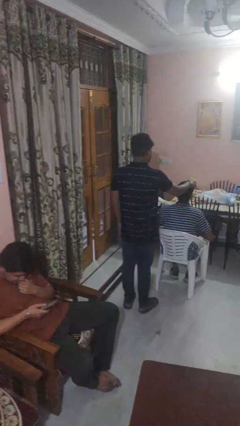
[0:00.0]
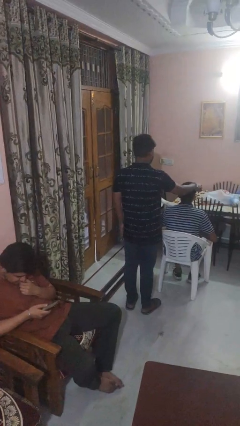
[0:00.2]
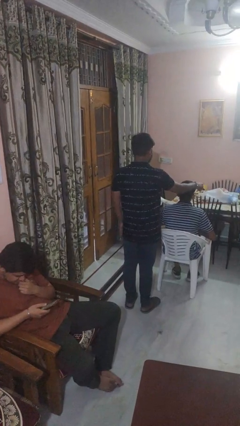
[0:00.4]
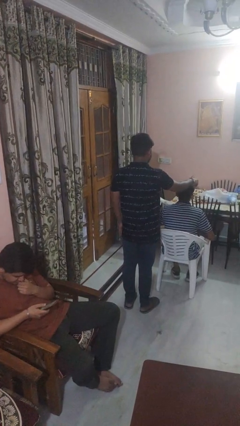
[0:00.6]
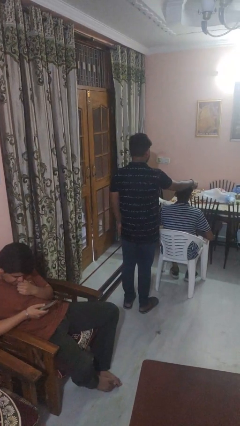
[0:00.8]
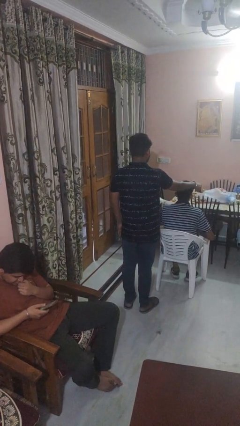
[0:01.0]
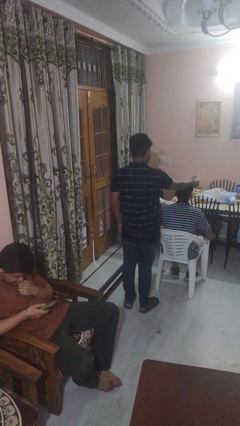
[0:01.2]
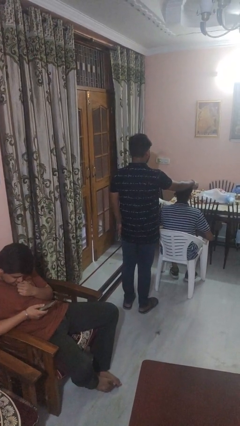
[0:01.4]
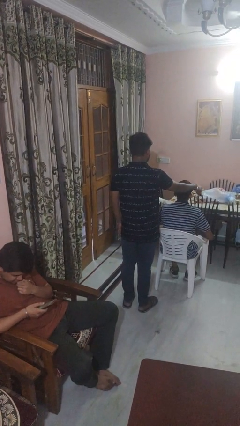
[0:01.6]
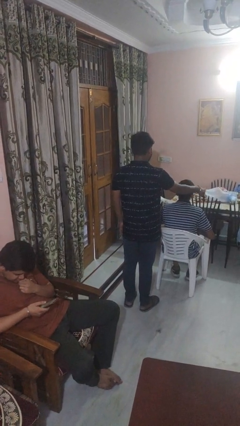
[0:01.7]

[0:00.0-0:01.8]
person brushes hair of person

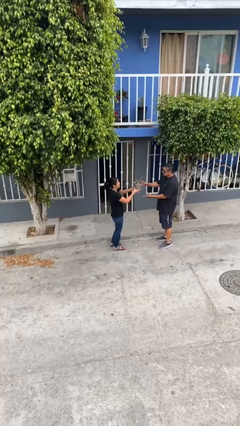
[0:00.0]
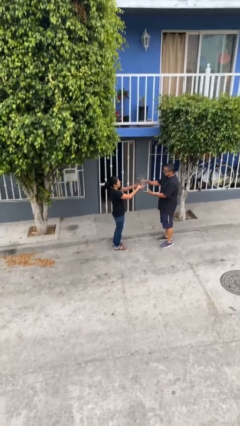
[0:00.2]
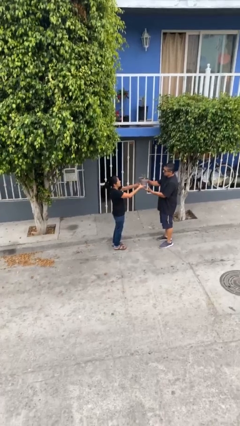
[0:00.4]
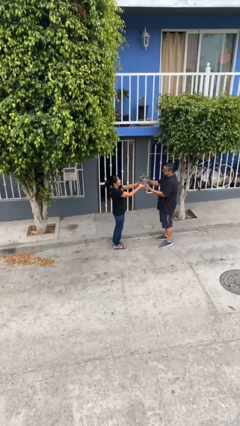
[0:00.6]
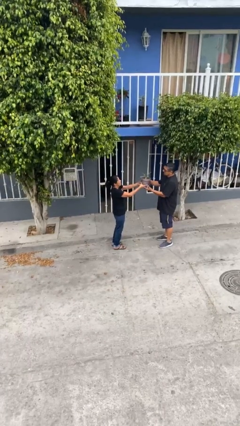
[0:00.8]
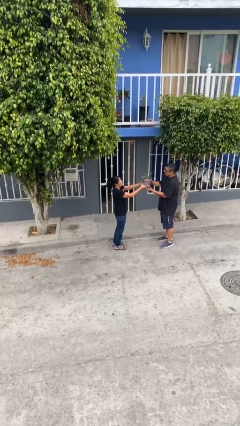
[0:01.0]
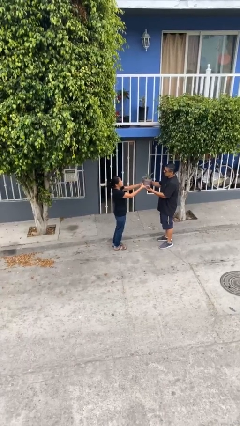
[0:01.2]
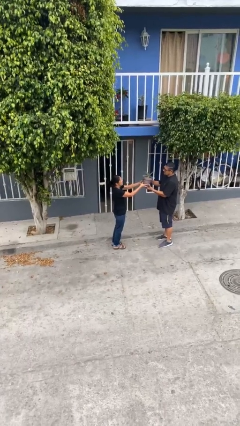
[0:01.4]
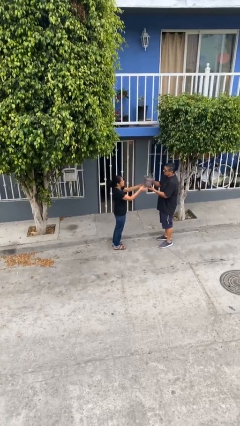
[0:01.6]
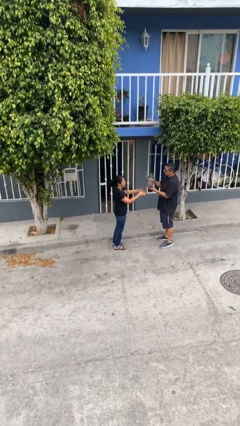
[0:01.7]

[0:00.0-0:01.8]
person transfers object to person

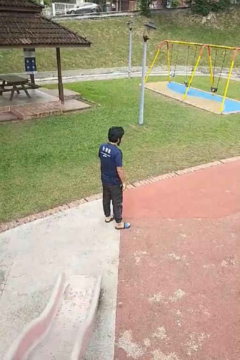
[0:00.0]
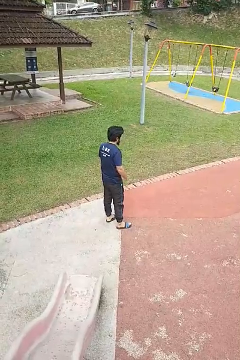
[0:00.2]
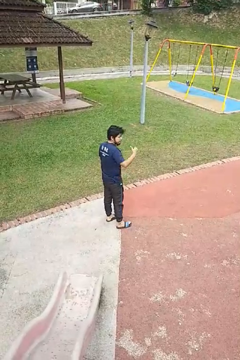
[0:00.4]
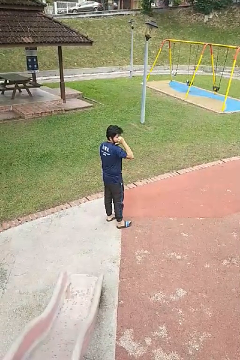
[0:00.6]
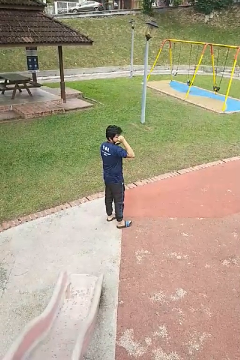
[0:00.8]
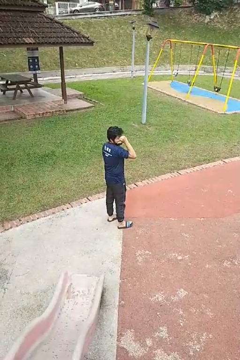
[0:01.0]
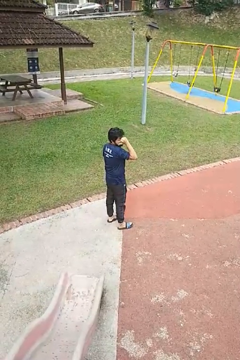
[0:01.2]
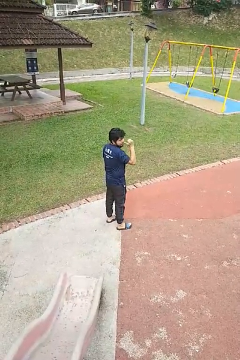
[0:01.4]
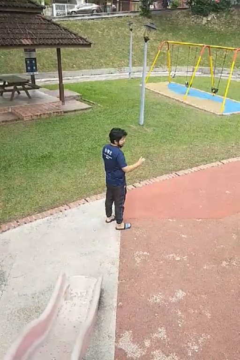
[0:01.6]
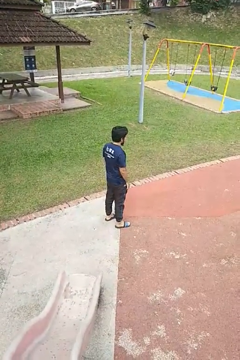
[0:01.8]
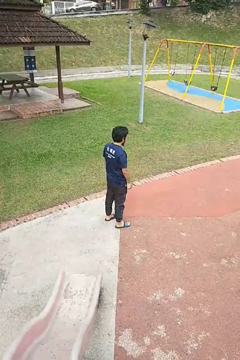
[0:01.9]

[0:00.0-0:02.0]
person gestures behind me

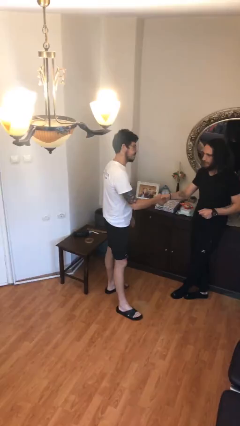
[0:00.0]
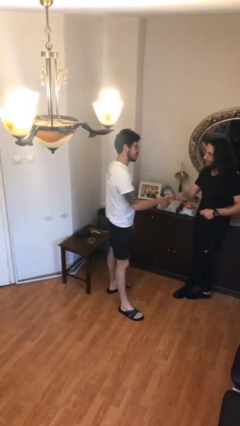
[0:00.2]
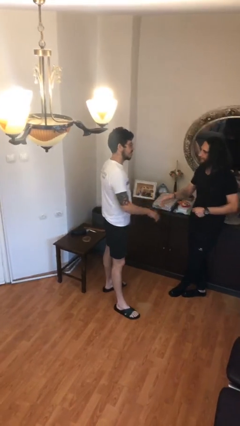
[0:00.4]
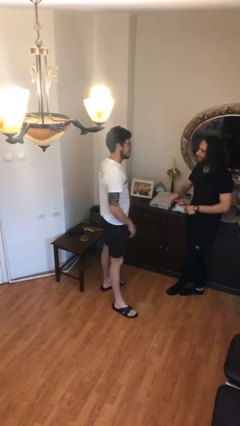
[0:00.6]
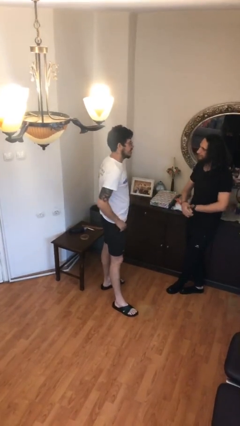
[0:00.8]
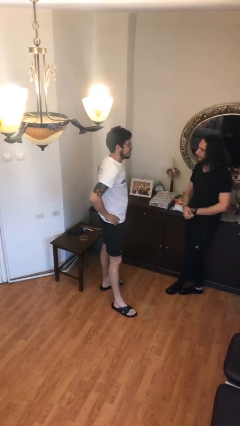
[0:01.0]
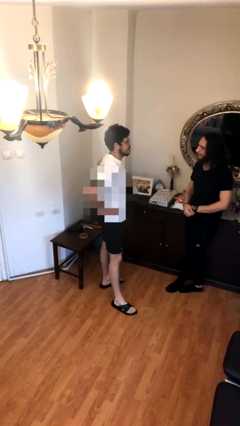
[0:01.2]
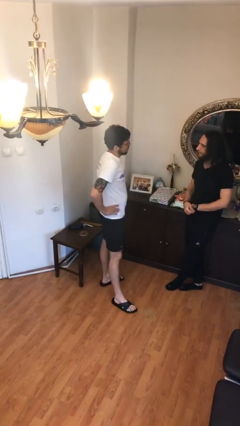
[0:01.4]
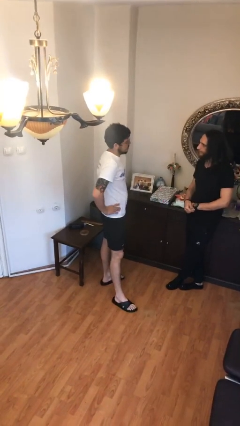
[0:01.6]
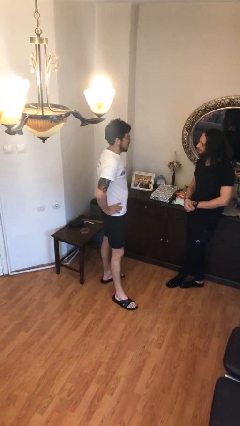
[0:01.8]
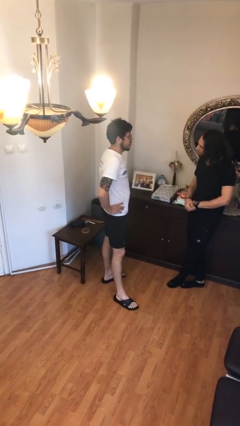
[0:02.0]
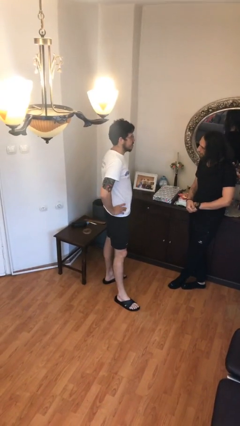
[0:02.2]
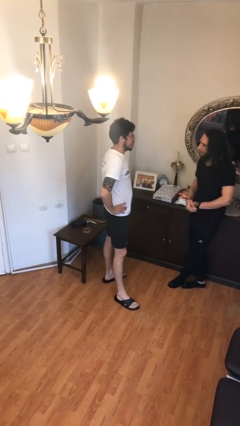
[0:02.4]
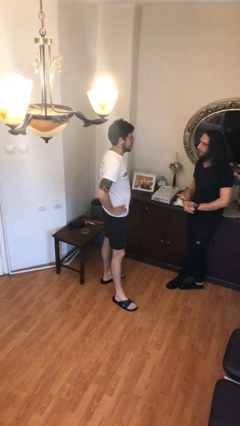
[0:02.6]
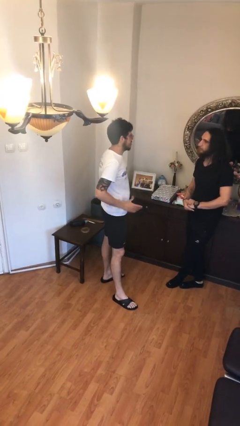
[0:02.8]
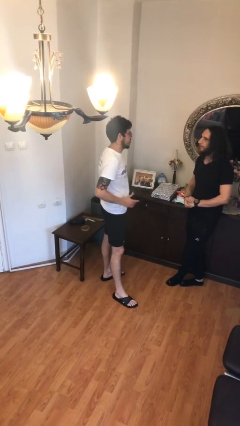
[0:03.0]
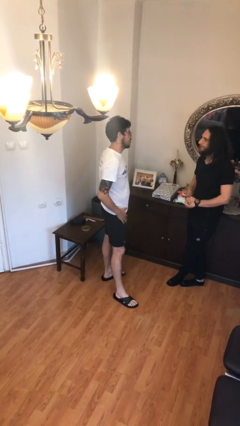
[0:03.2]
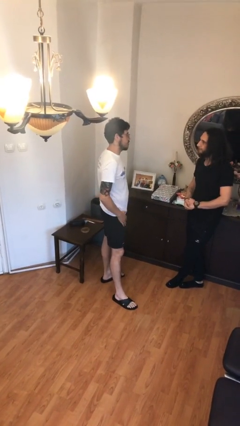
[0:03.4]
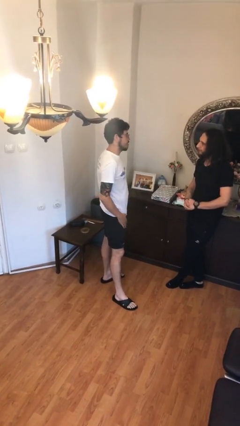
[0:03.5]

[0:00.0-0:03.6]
person talks to person

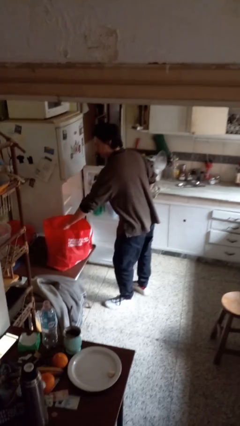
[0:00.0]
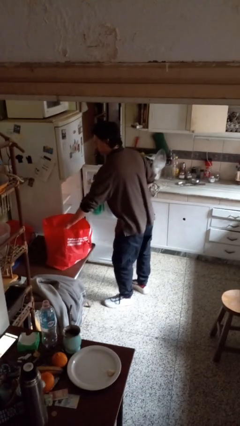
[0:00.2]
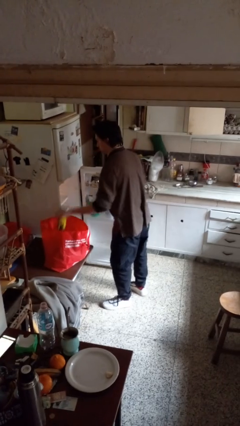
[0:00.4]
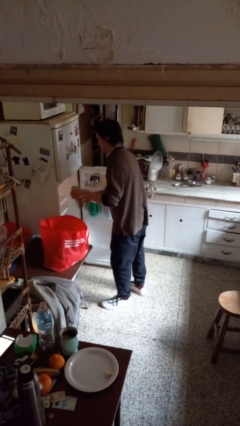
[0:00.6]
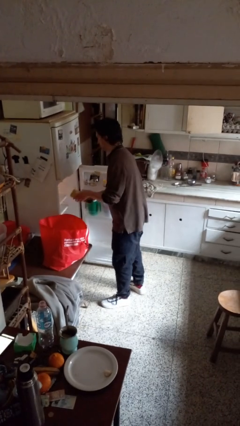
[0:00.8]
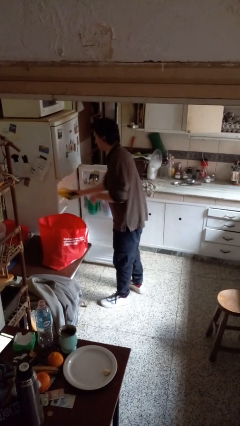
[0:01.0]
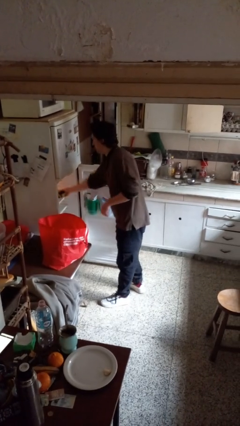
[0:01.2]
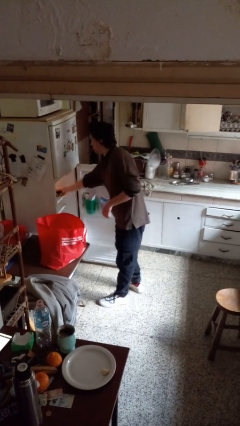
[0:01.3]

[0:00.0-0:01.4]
person loads groceries into refrigerator

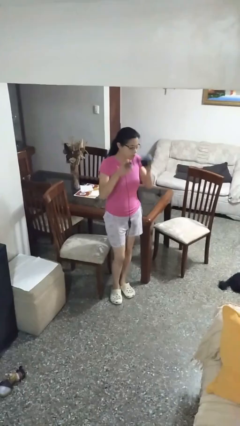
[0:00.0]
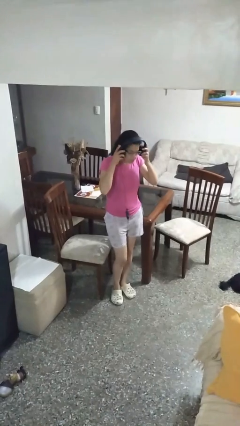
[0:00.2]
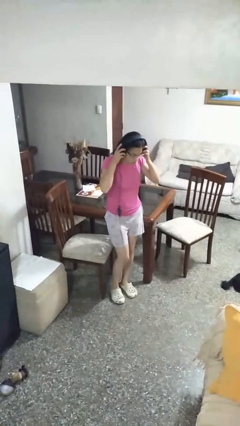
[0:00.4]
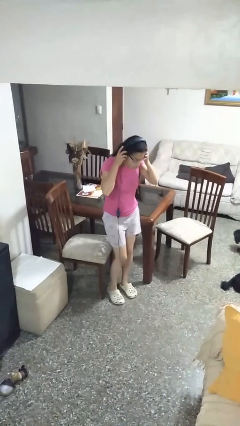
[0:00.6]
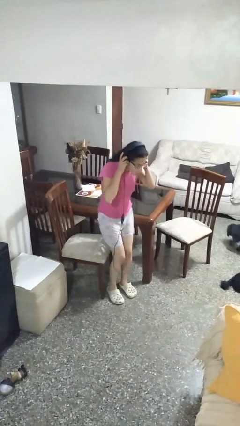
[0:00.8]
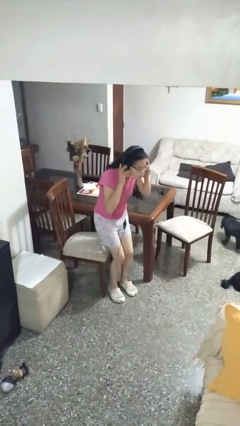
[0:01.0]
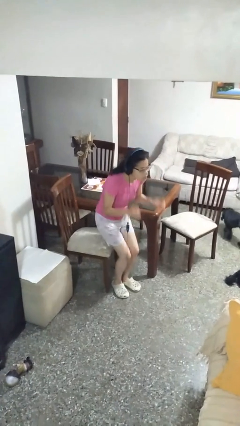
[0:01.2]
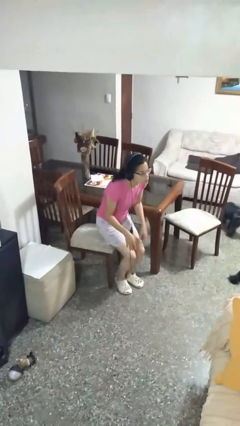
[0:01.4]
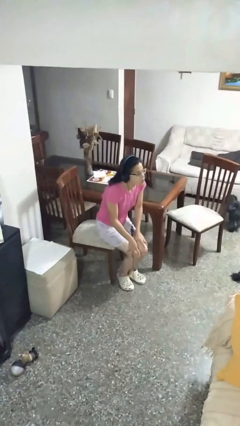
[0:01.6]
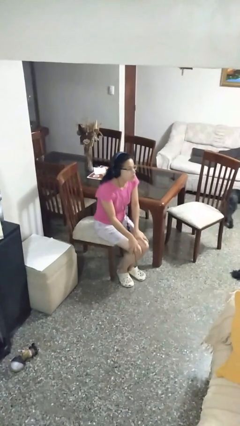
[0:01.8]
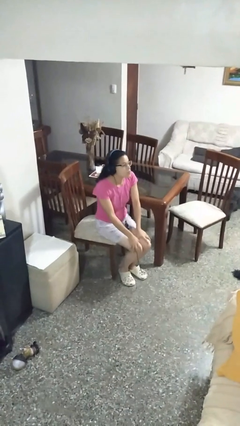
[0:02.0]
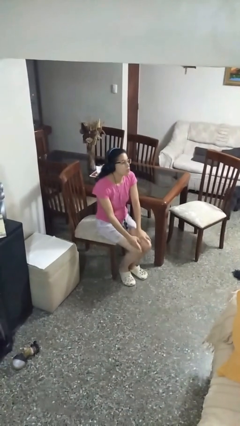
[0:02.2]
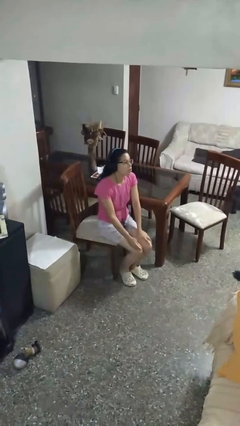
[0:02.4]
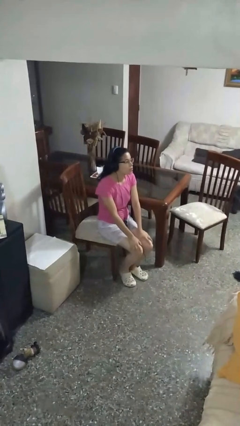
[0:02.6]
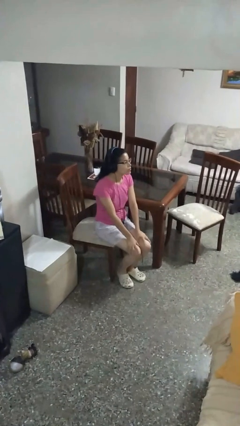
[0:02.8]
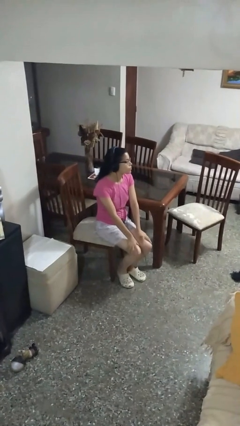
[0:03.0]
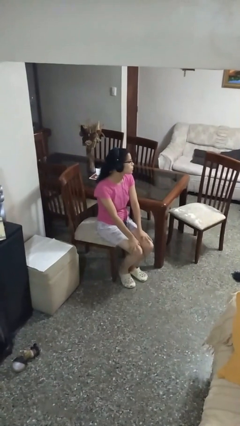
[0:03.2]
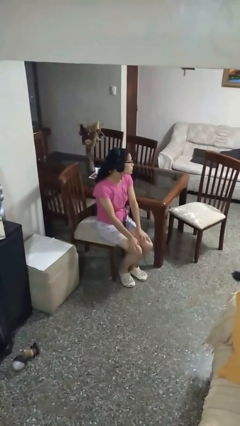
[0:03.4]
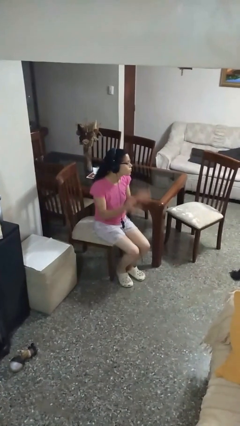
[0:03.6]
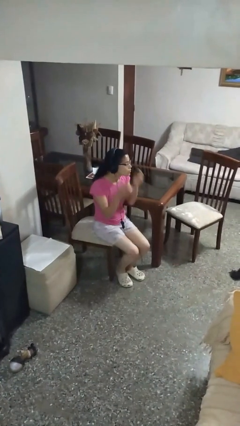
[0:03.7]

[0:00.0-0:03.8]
person puts on headphones

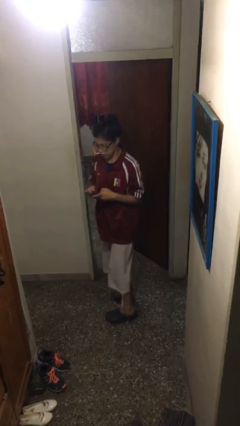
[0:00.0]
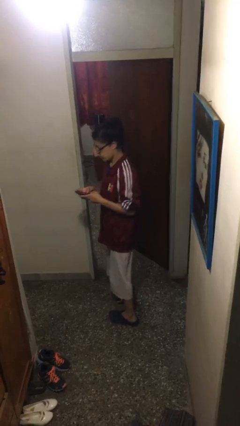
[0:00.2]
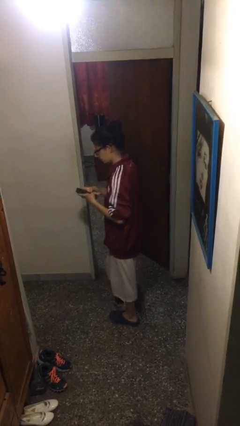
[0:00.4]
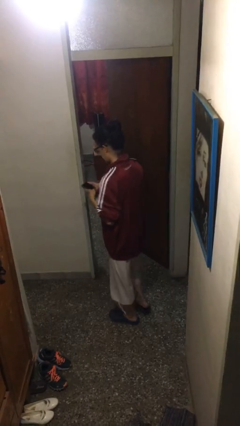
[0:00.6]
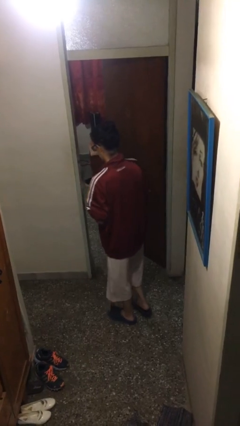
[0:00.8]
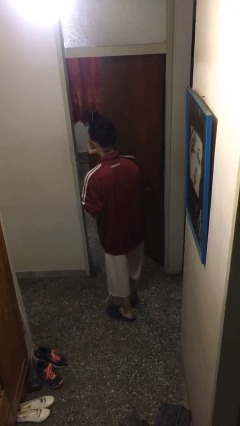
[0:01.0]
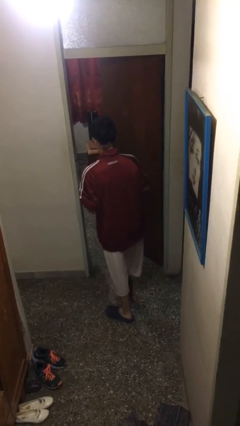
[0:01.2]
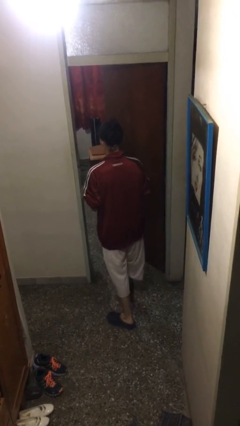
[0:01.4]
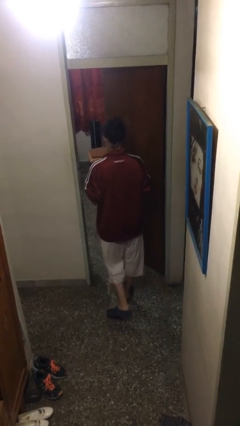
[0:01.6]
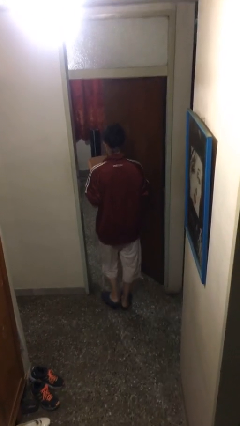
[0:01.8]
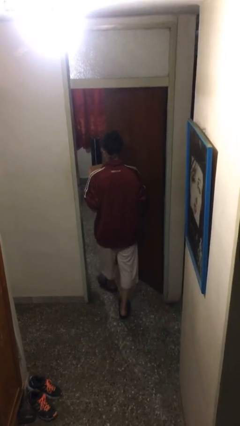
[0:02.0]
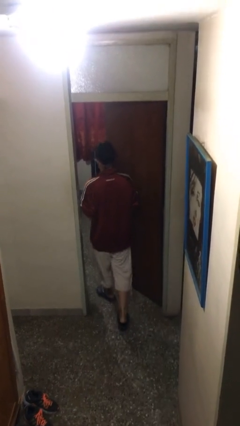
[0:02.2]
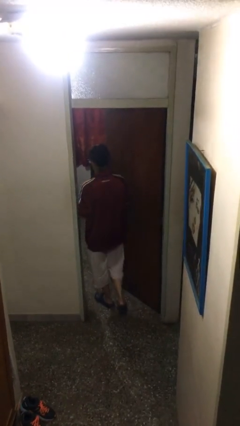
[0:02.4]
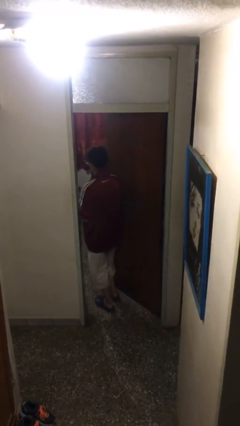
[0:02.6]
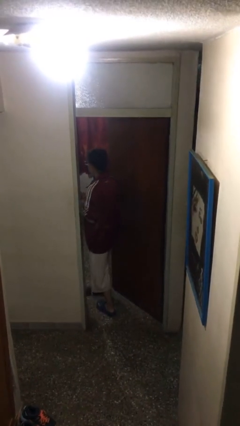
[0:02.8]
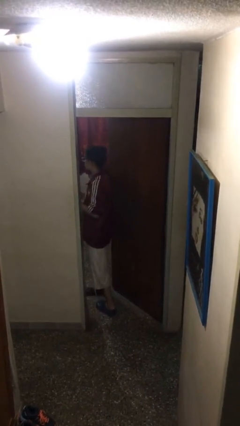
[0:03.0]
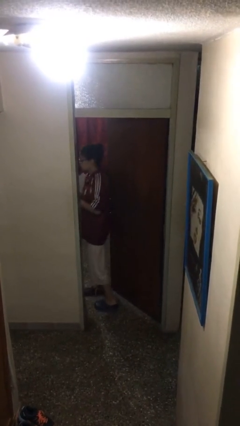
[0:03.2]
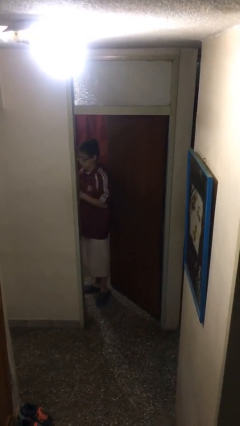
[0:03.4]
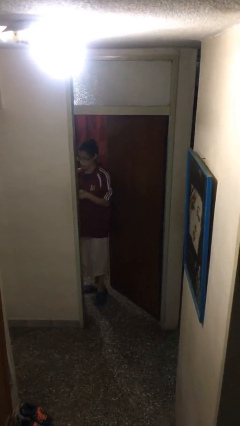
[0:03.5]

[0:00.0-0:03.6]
person exits scene through structure
